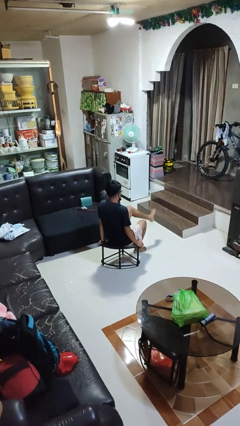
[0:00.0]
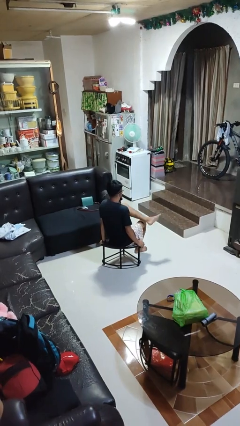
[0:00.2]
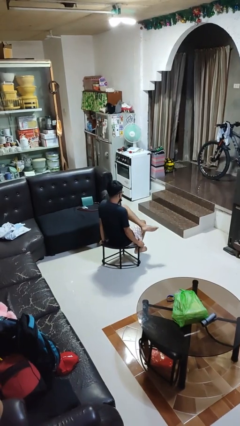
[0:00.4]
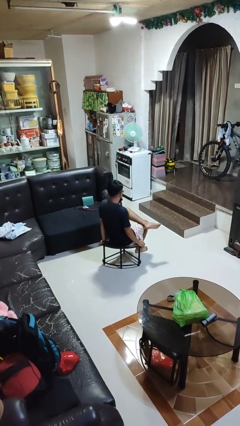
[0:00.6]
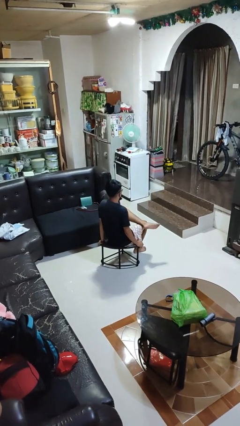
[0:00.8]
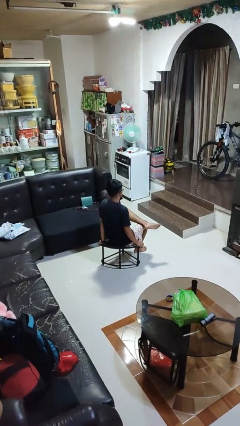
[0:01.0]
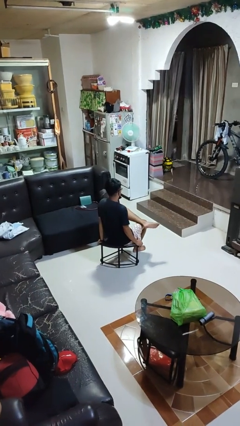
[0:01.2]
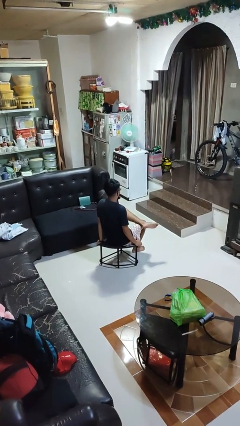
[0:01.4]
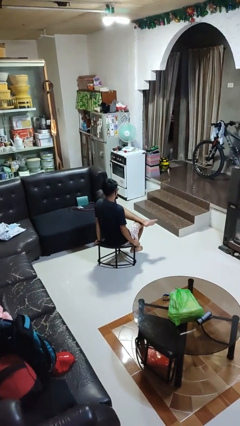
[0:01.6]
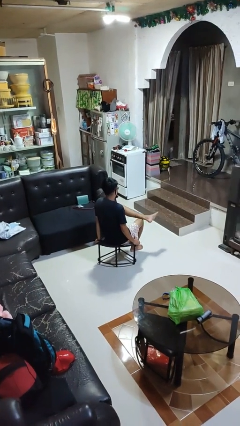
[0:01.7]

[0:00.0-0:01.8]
person crosses legs

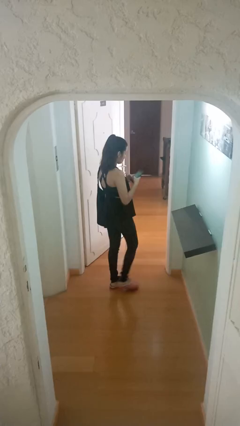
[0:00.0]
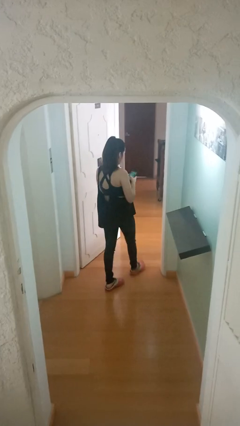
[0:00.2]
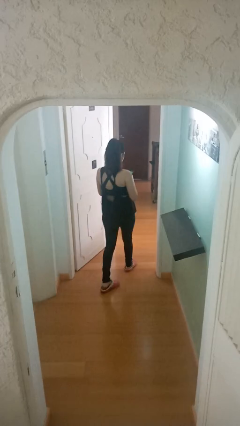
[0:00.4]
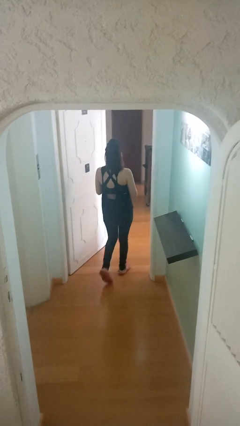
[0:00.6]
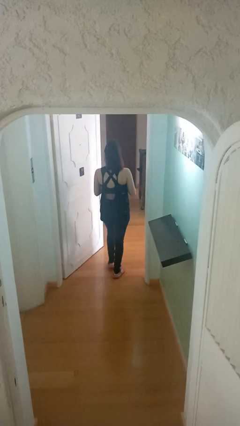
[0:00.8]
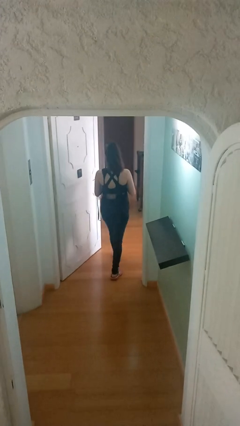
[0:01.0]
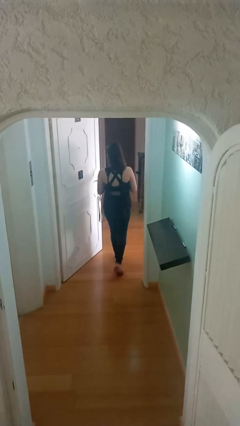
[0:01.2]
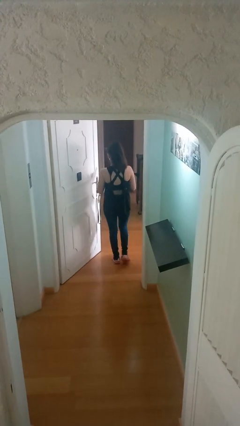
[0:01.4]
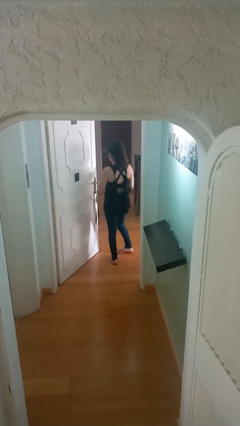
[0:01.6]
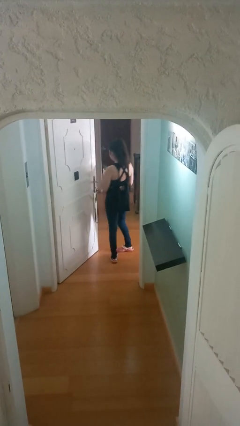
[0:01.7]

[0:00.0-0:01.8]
person exits scene through structure

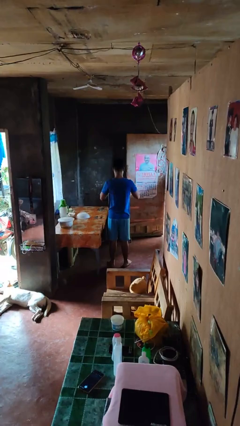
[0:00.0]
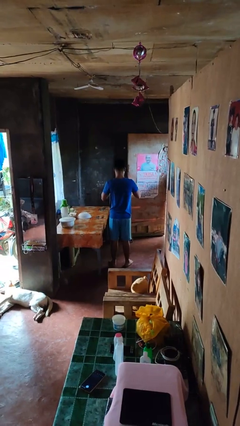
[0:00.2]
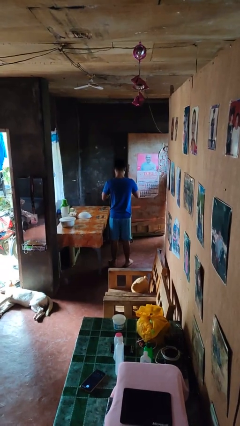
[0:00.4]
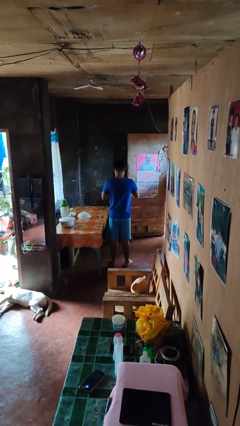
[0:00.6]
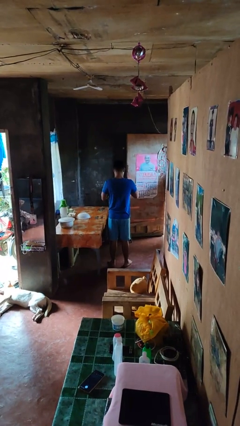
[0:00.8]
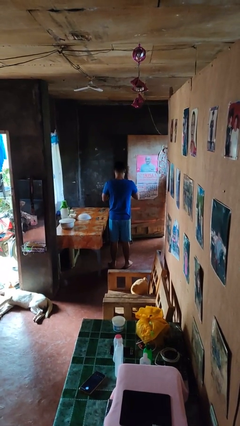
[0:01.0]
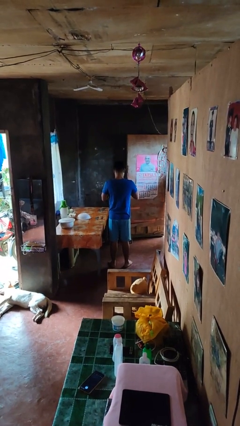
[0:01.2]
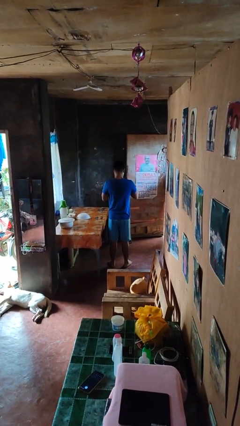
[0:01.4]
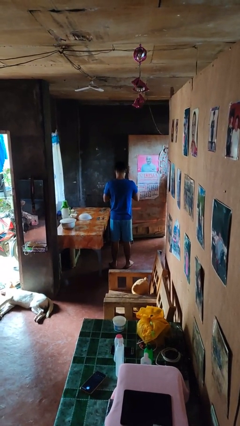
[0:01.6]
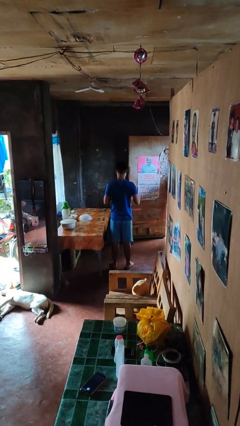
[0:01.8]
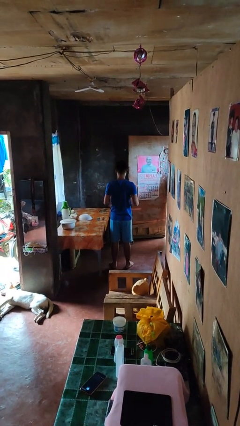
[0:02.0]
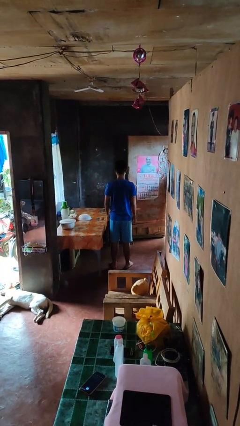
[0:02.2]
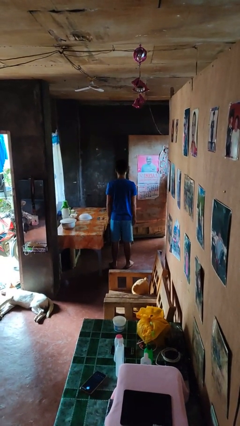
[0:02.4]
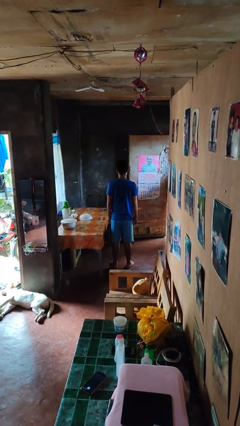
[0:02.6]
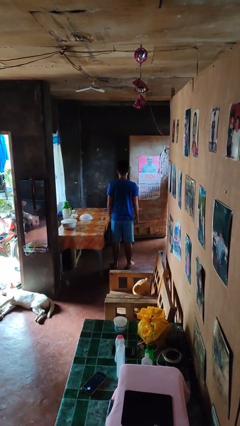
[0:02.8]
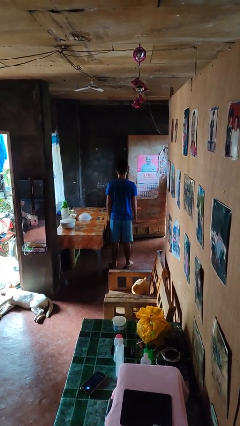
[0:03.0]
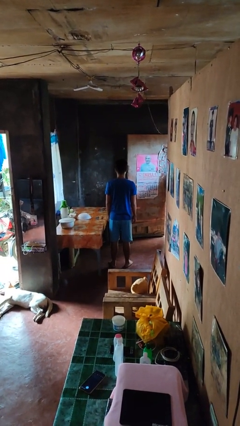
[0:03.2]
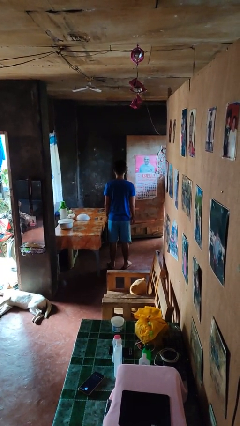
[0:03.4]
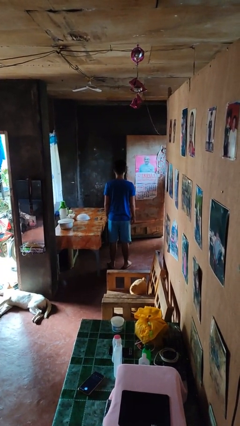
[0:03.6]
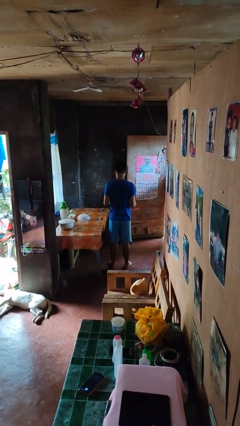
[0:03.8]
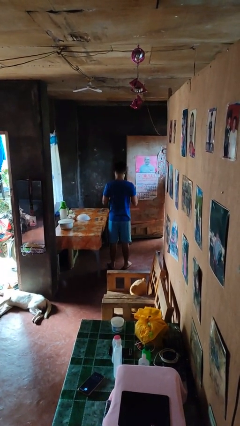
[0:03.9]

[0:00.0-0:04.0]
person unbuttons shirt

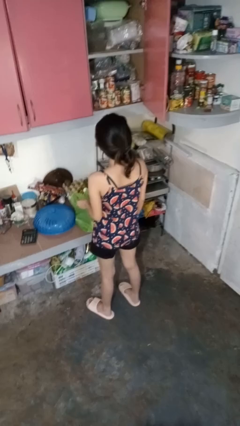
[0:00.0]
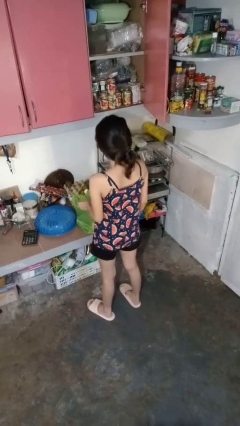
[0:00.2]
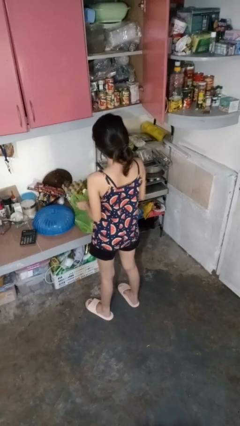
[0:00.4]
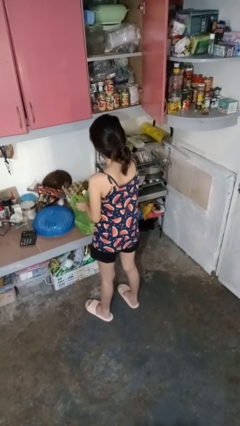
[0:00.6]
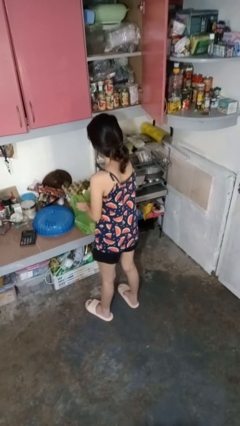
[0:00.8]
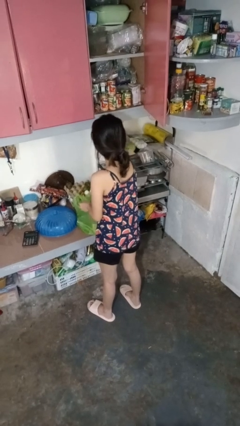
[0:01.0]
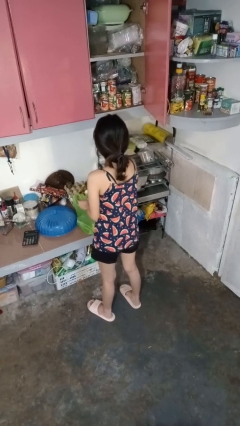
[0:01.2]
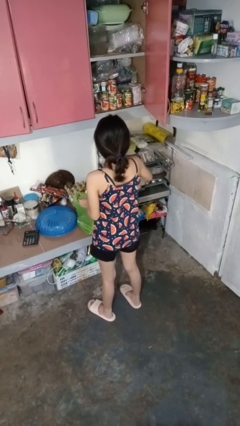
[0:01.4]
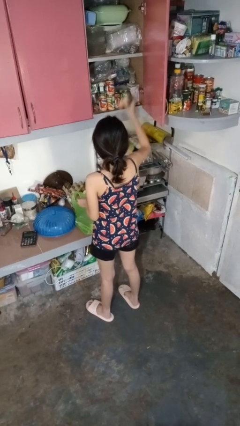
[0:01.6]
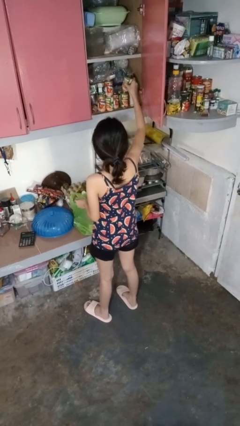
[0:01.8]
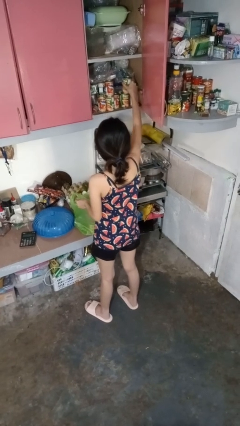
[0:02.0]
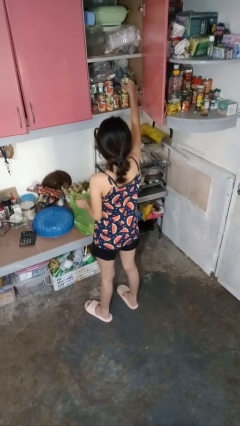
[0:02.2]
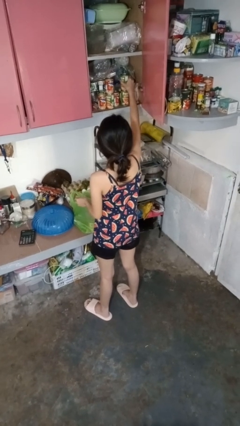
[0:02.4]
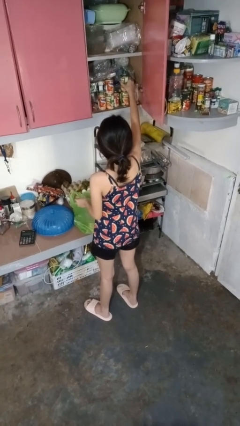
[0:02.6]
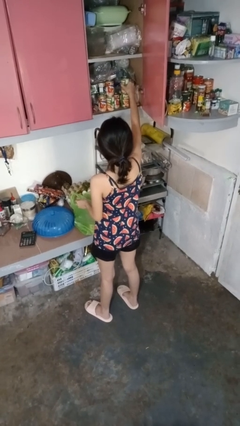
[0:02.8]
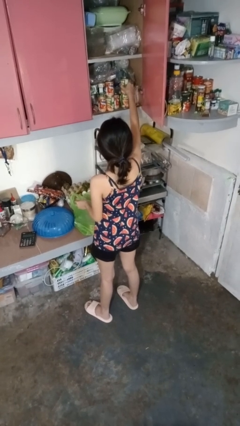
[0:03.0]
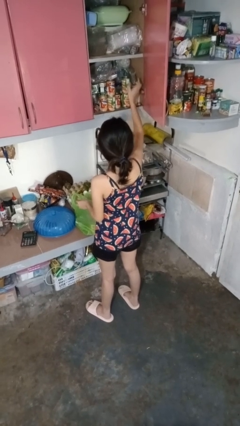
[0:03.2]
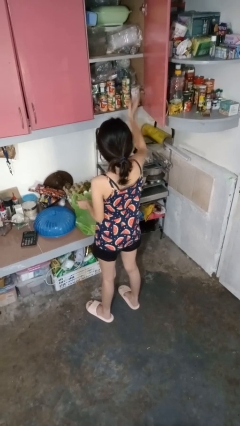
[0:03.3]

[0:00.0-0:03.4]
person loads groceries into cabinet

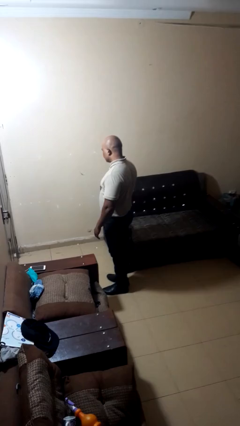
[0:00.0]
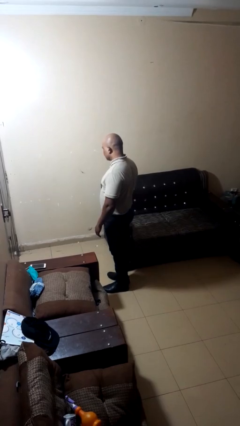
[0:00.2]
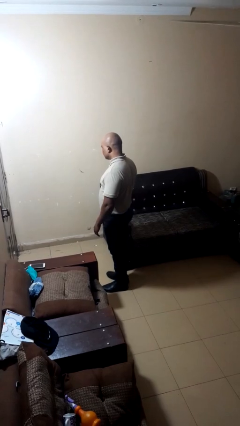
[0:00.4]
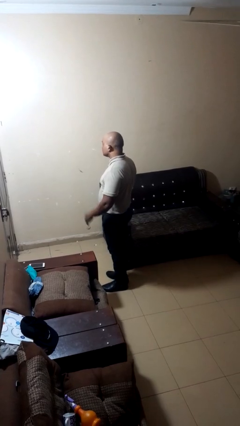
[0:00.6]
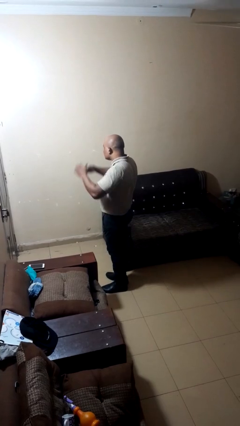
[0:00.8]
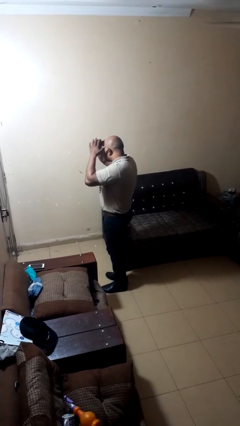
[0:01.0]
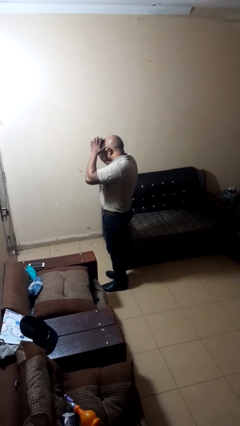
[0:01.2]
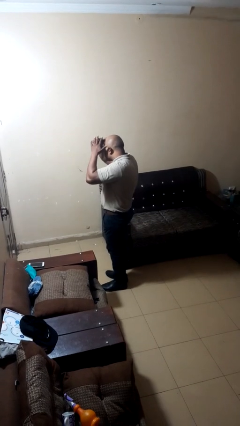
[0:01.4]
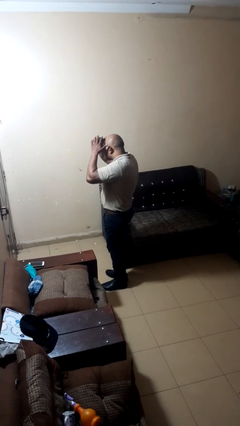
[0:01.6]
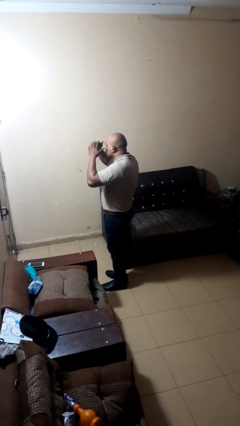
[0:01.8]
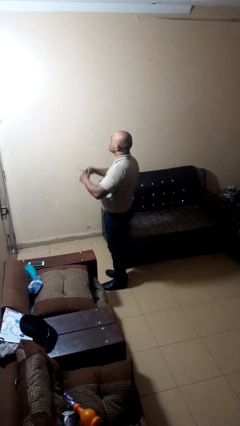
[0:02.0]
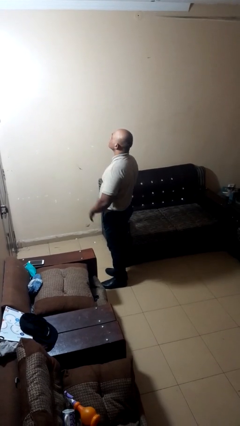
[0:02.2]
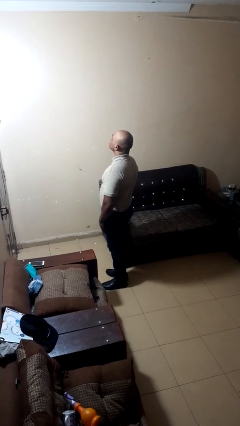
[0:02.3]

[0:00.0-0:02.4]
person shades eyes

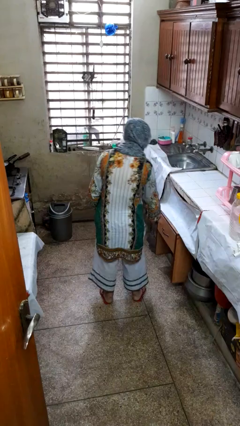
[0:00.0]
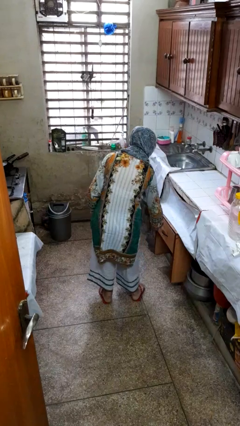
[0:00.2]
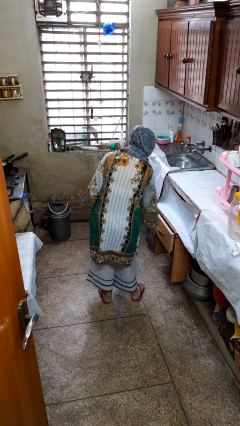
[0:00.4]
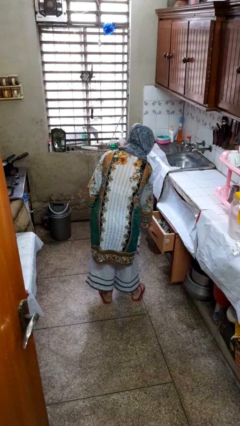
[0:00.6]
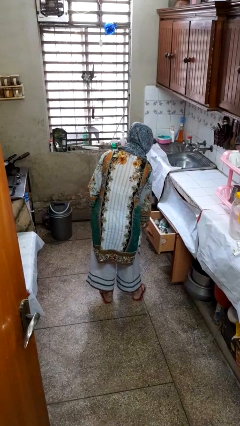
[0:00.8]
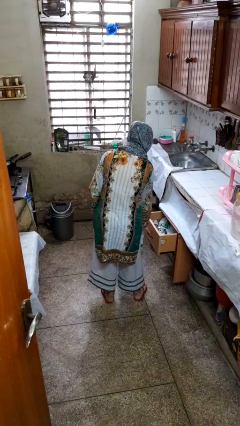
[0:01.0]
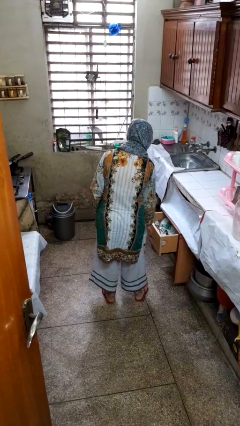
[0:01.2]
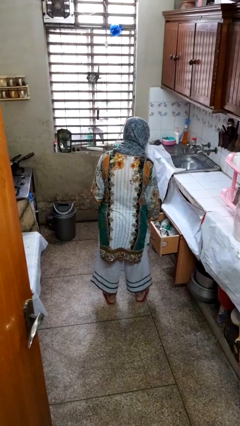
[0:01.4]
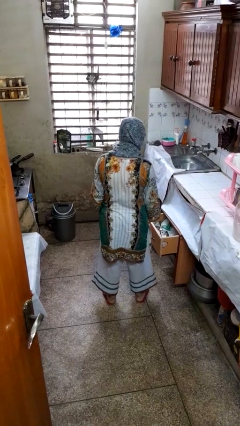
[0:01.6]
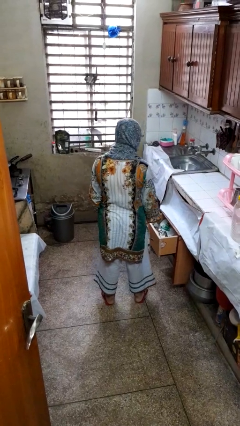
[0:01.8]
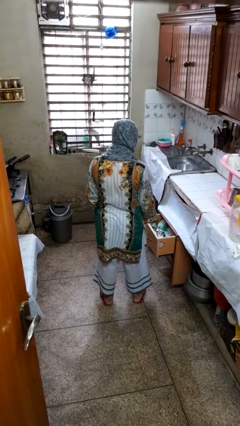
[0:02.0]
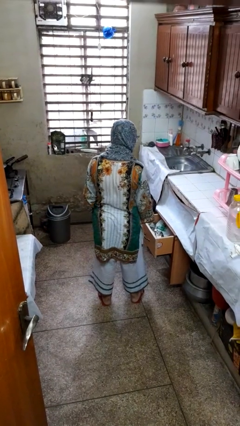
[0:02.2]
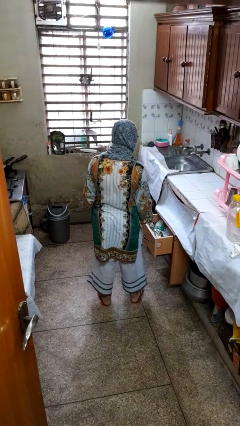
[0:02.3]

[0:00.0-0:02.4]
person opens kitchen drawer

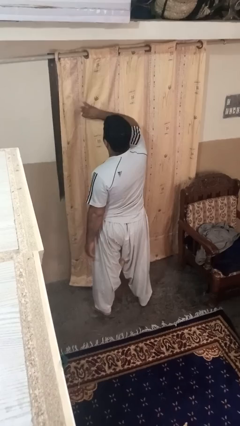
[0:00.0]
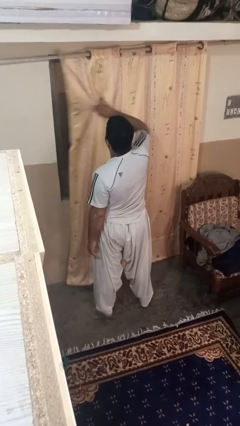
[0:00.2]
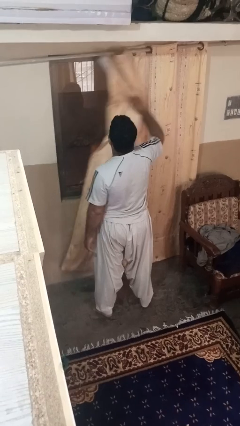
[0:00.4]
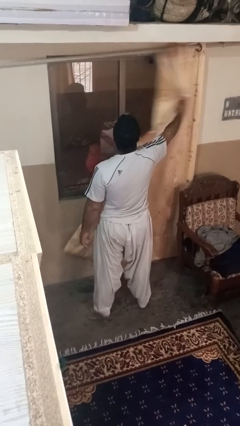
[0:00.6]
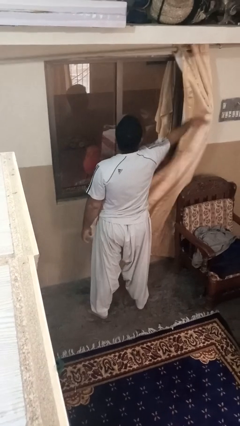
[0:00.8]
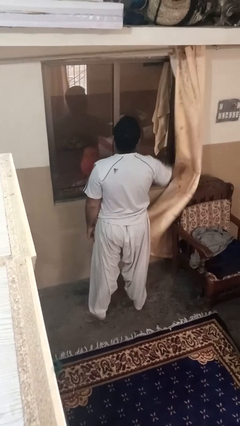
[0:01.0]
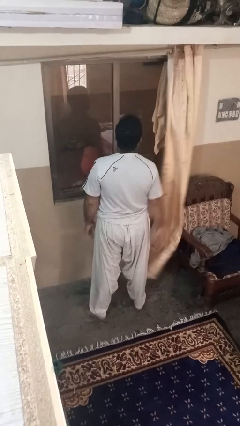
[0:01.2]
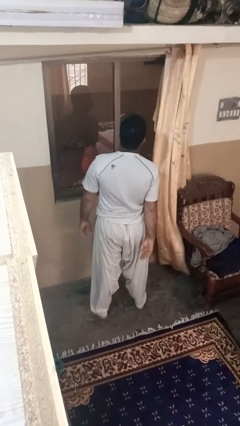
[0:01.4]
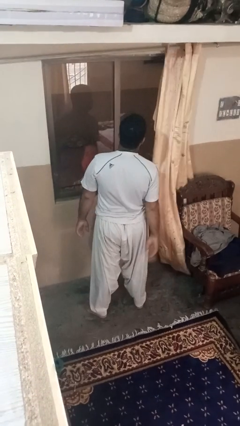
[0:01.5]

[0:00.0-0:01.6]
person opens curtains
